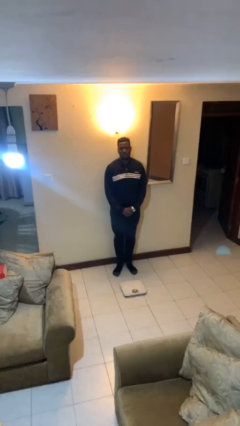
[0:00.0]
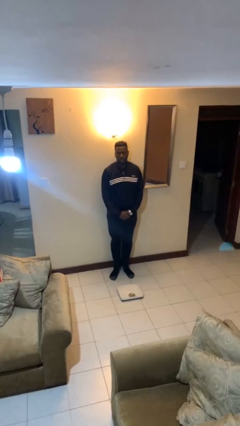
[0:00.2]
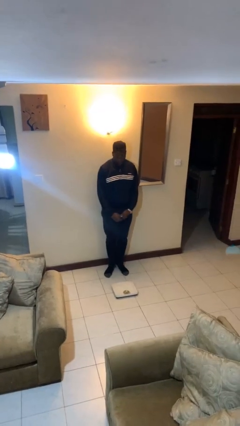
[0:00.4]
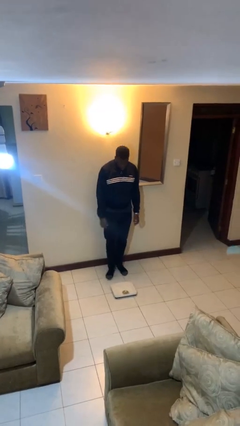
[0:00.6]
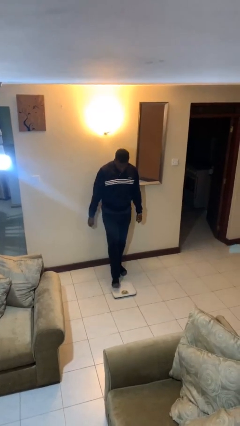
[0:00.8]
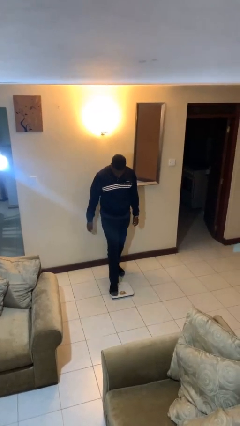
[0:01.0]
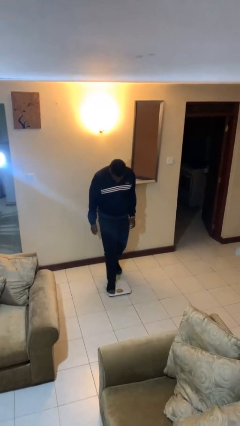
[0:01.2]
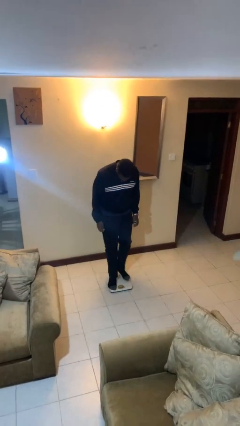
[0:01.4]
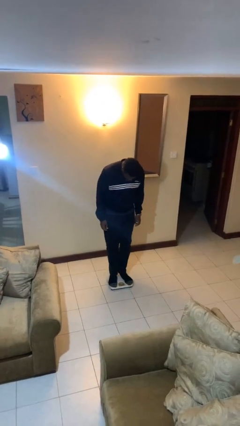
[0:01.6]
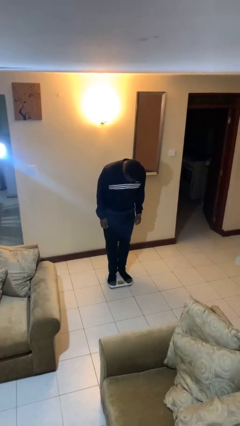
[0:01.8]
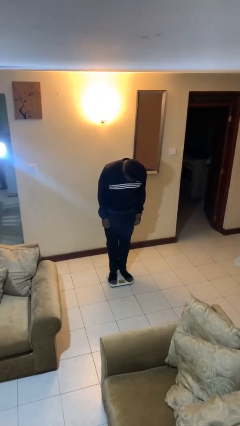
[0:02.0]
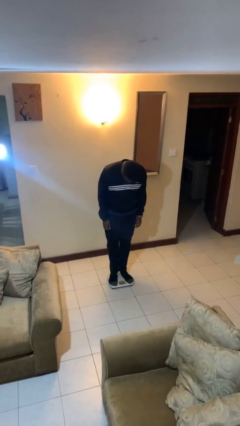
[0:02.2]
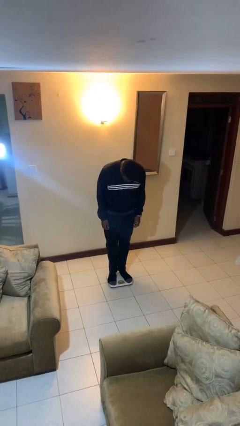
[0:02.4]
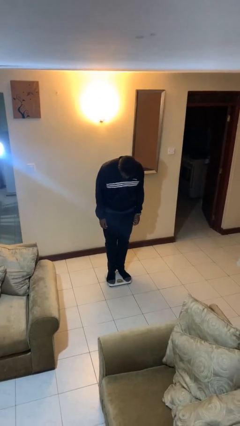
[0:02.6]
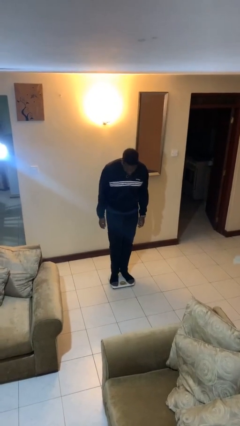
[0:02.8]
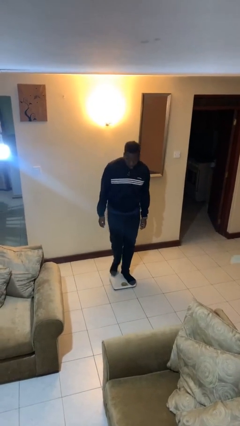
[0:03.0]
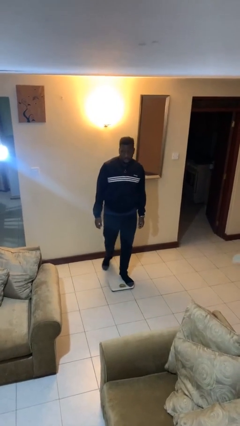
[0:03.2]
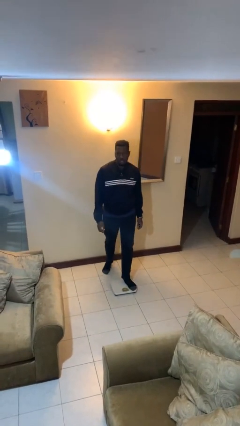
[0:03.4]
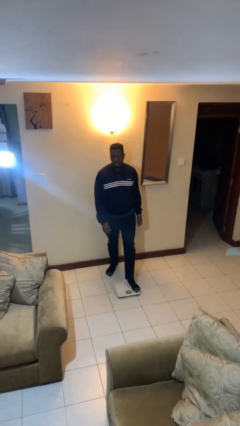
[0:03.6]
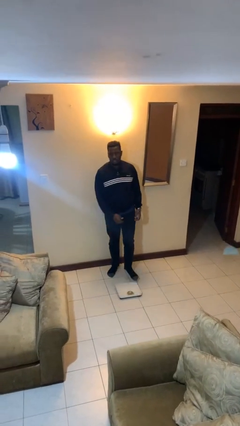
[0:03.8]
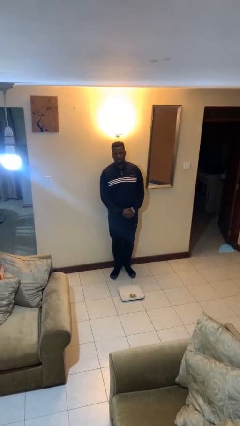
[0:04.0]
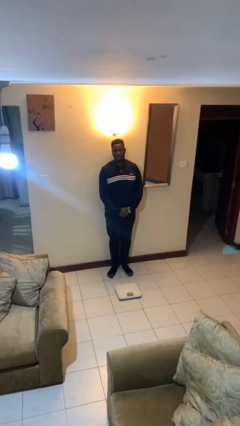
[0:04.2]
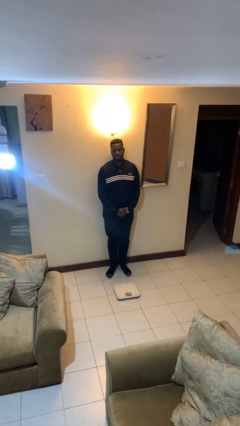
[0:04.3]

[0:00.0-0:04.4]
person uses bodyweight scale

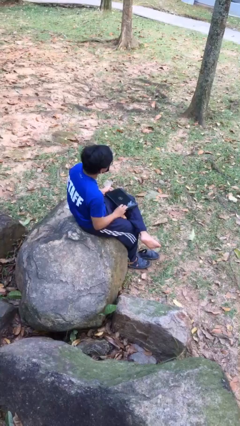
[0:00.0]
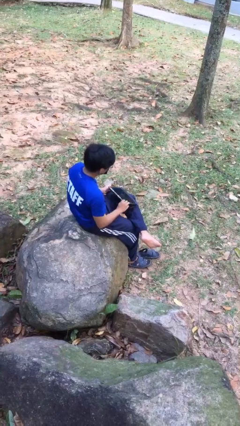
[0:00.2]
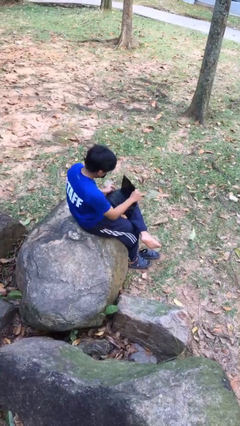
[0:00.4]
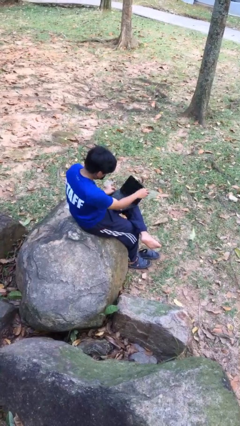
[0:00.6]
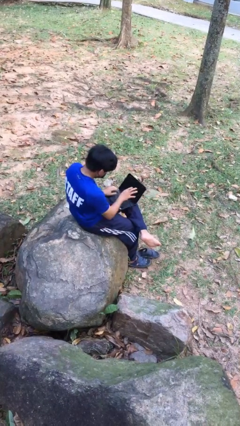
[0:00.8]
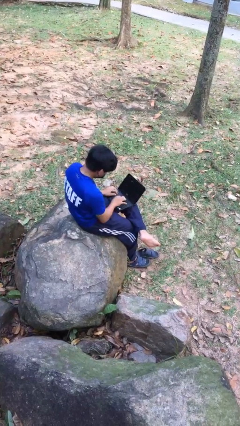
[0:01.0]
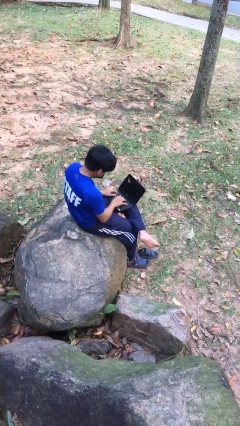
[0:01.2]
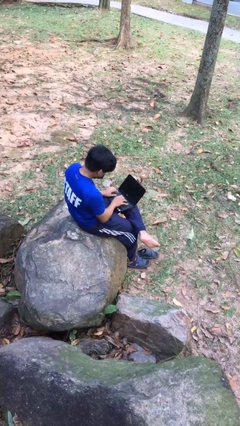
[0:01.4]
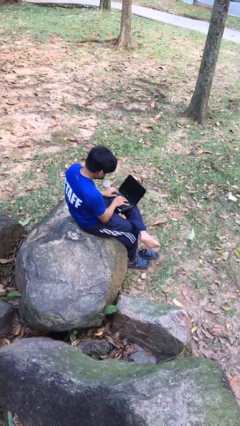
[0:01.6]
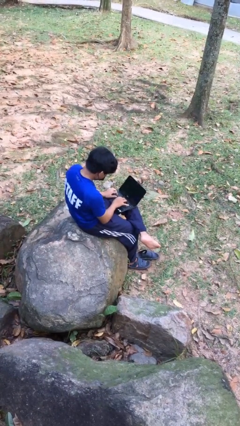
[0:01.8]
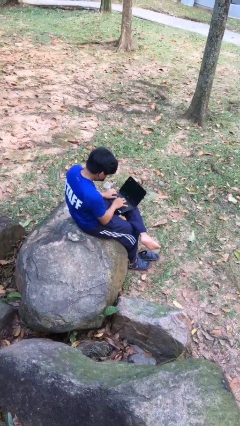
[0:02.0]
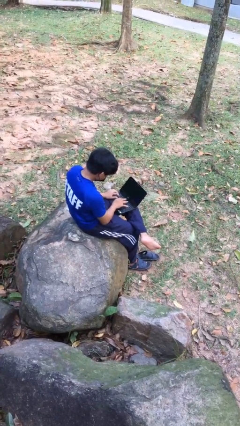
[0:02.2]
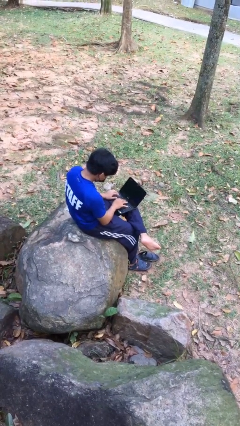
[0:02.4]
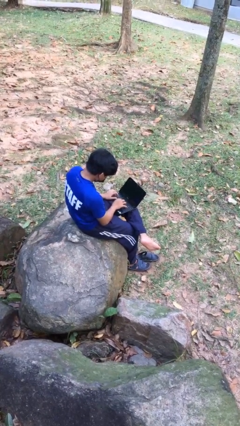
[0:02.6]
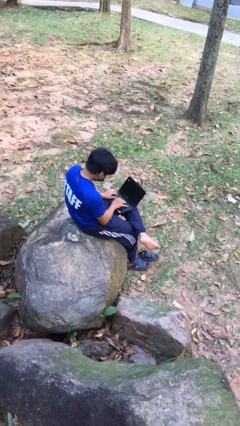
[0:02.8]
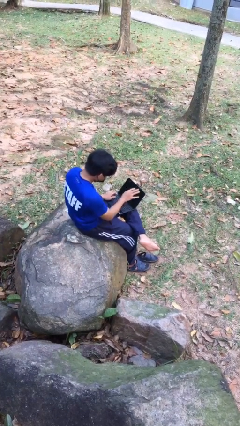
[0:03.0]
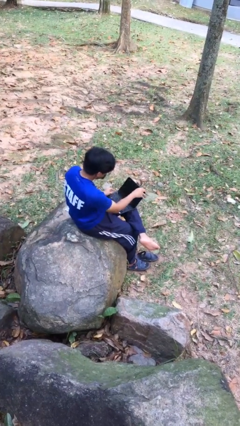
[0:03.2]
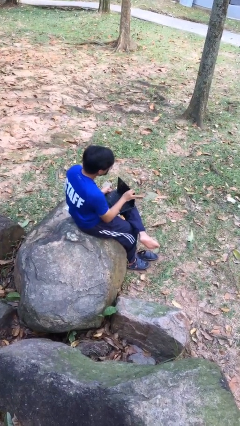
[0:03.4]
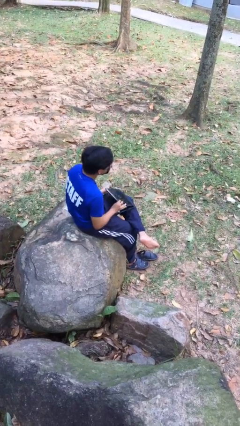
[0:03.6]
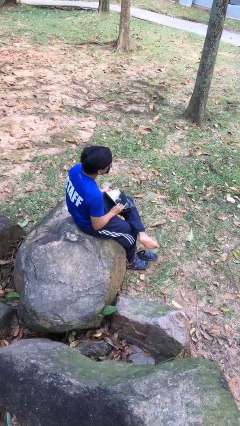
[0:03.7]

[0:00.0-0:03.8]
person interacts with laptop

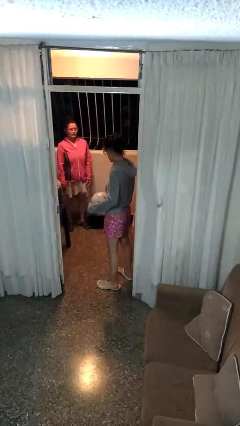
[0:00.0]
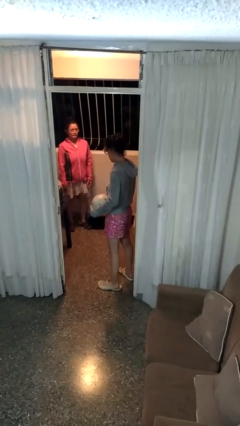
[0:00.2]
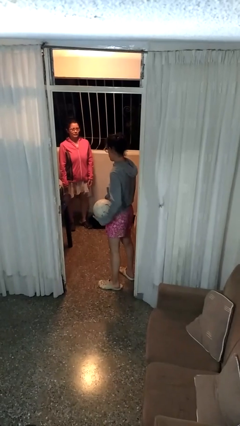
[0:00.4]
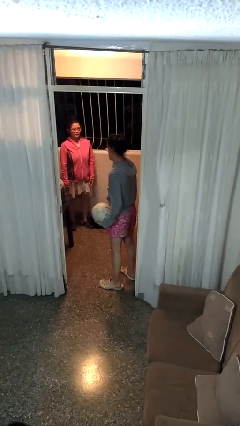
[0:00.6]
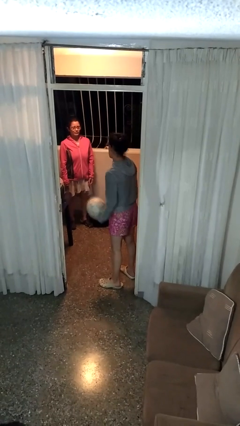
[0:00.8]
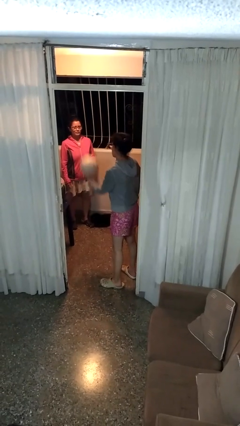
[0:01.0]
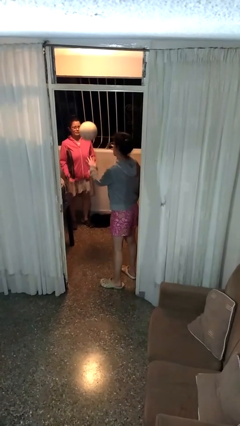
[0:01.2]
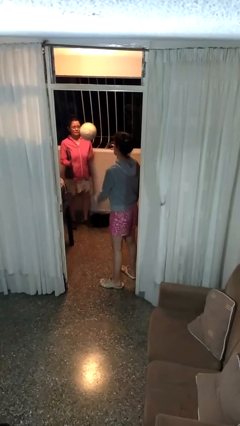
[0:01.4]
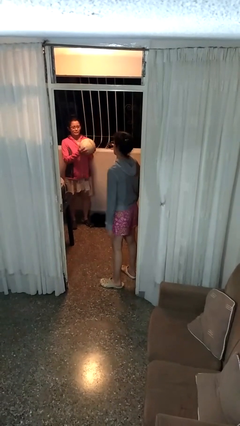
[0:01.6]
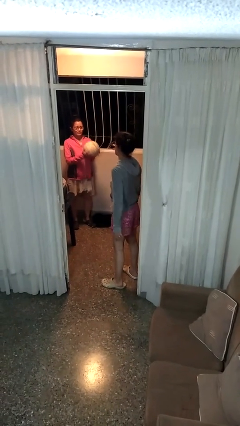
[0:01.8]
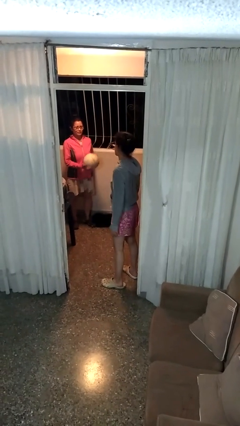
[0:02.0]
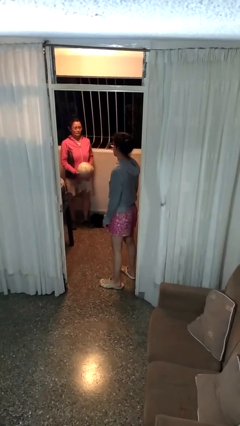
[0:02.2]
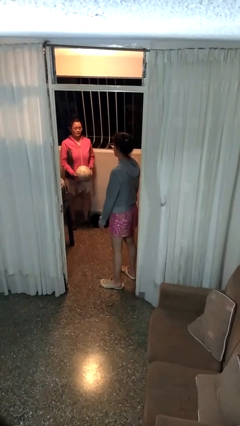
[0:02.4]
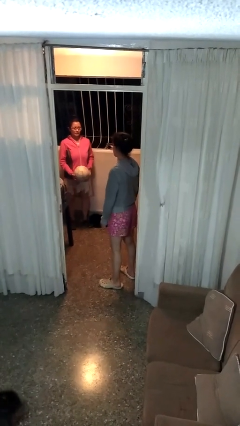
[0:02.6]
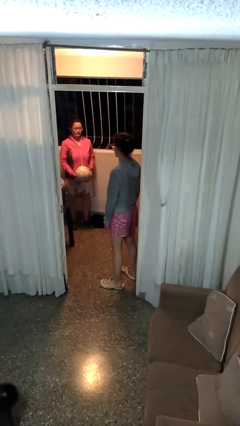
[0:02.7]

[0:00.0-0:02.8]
person throws object to person

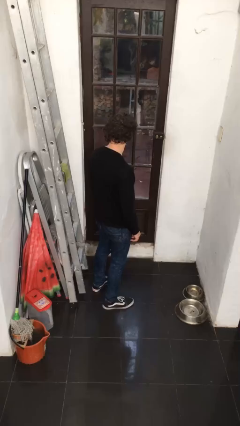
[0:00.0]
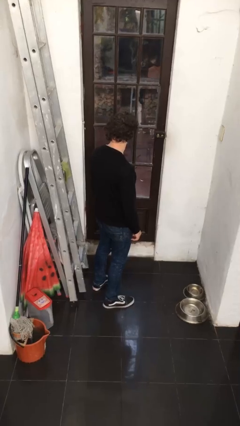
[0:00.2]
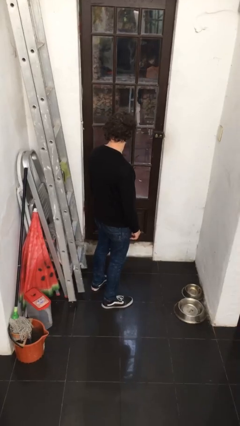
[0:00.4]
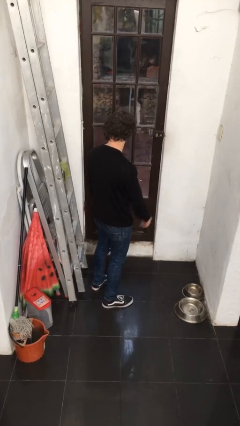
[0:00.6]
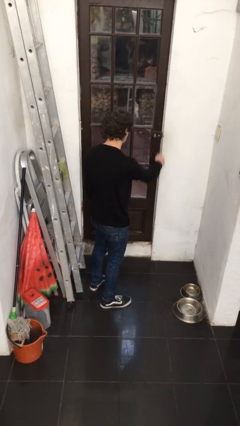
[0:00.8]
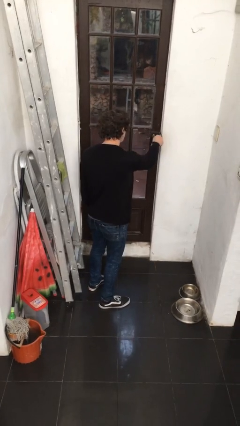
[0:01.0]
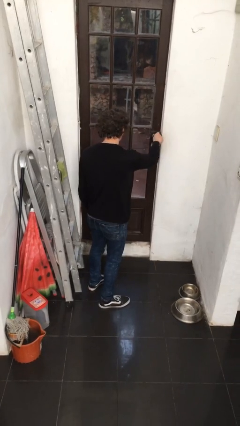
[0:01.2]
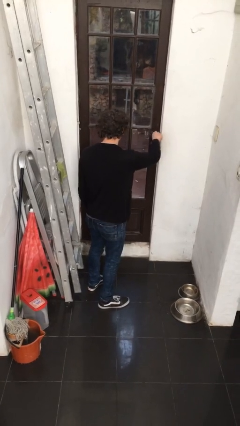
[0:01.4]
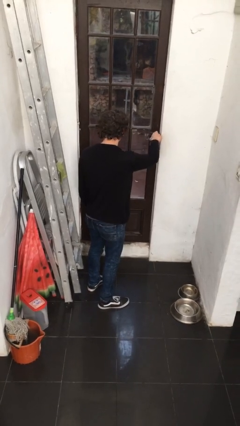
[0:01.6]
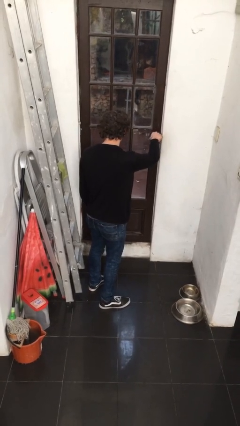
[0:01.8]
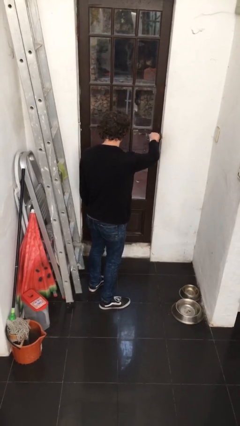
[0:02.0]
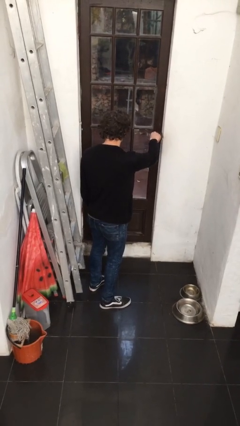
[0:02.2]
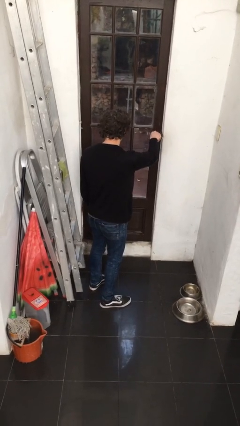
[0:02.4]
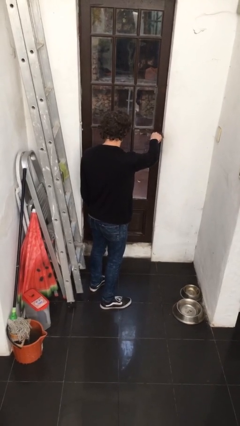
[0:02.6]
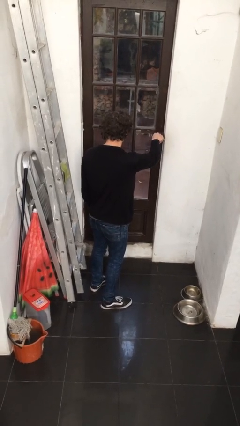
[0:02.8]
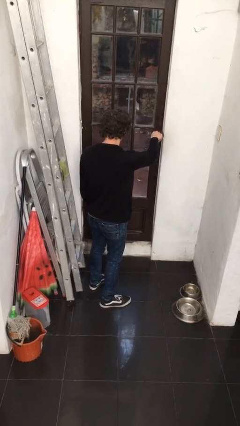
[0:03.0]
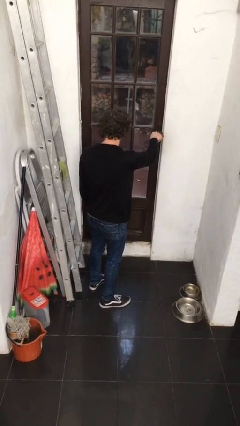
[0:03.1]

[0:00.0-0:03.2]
person unlocks door with keys

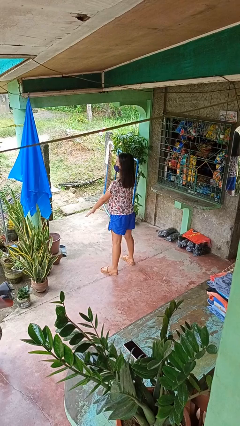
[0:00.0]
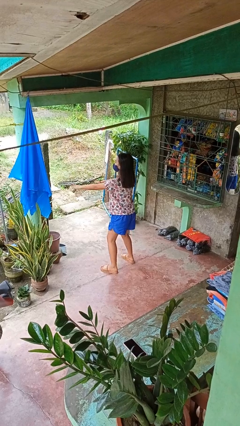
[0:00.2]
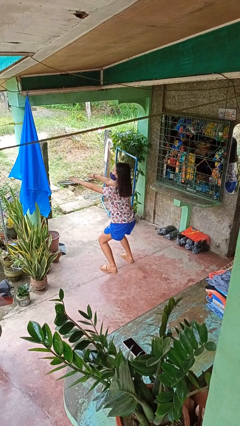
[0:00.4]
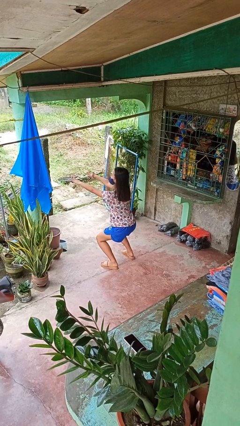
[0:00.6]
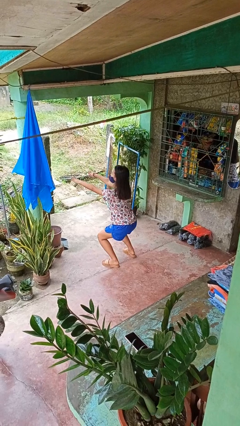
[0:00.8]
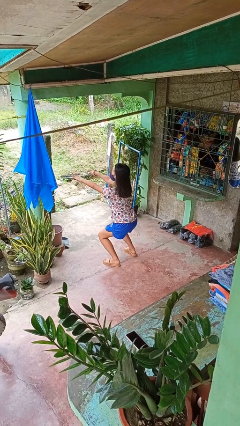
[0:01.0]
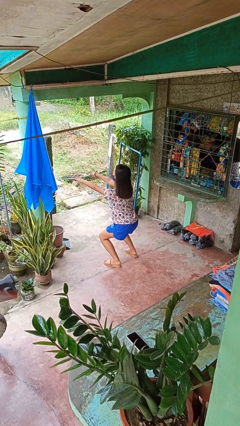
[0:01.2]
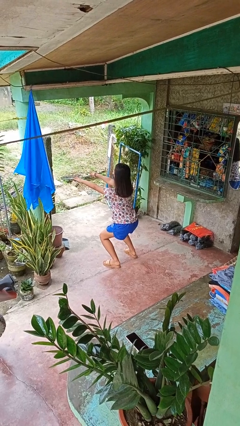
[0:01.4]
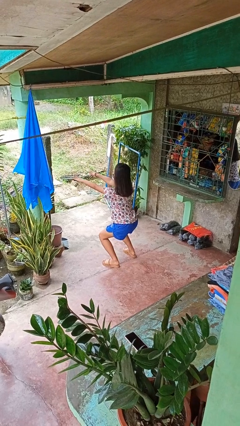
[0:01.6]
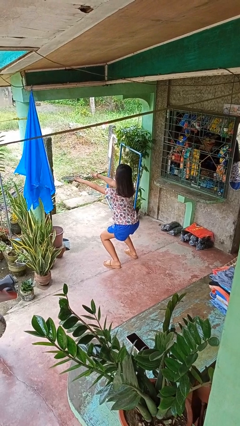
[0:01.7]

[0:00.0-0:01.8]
person squats

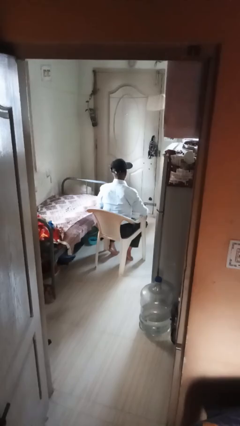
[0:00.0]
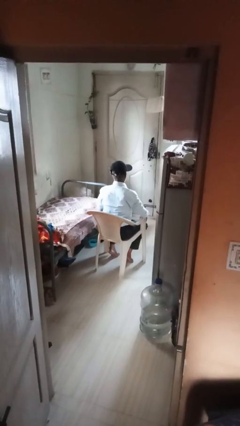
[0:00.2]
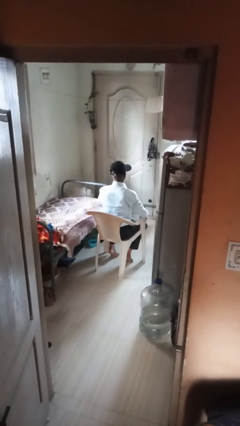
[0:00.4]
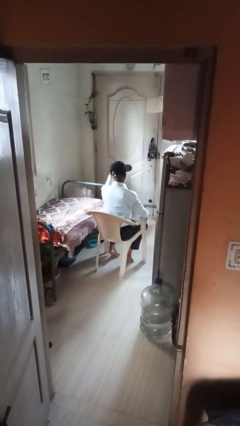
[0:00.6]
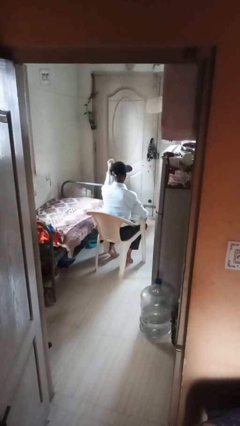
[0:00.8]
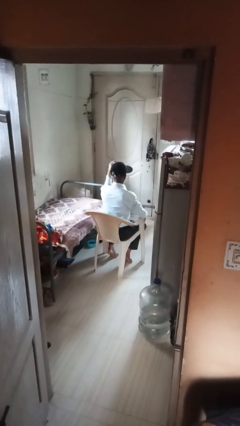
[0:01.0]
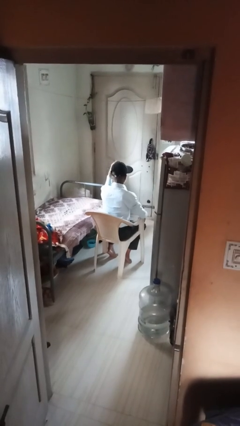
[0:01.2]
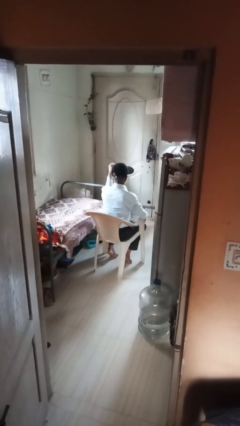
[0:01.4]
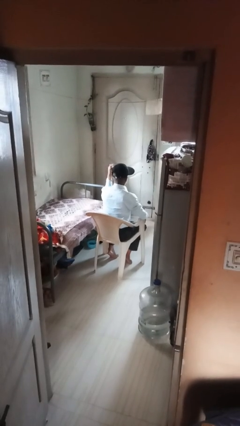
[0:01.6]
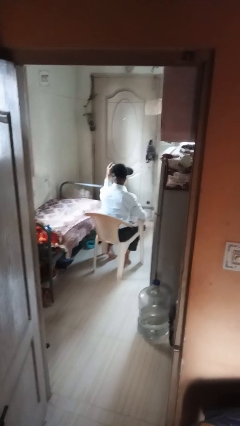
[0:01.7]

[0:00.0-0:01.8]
person snaps fingers
